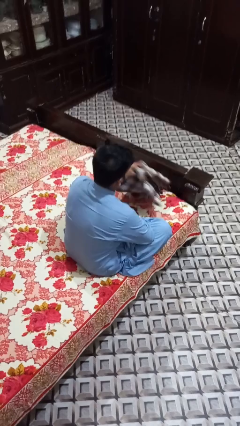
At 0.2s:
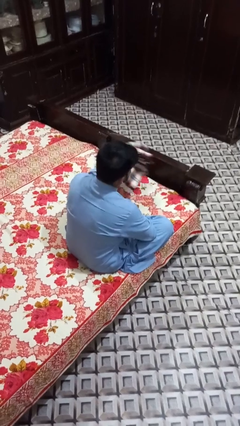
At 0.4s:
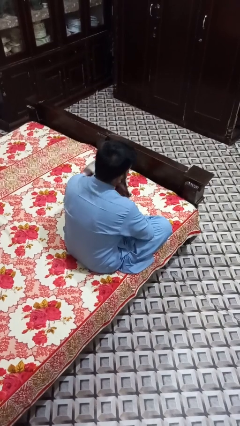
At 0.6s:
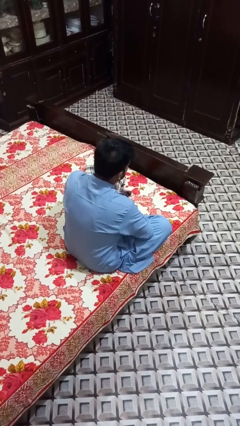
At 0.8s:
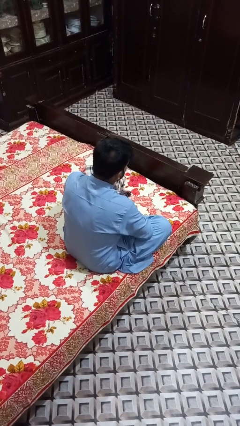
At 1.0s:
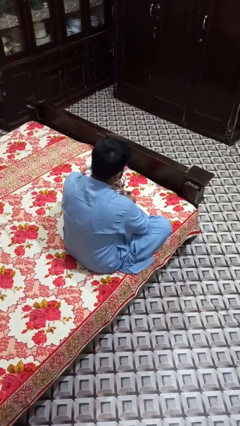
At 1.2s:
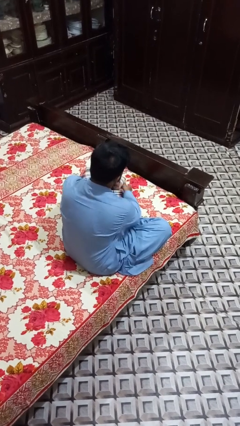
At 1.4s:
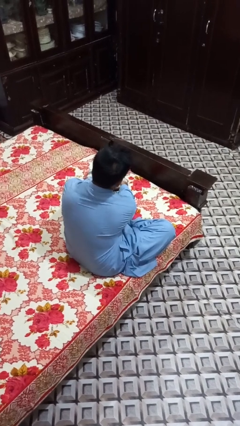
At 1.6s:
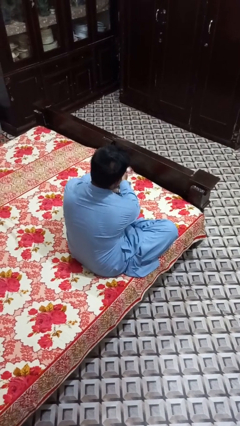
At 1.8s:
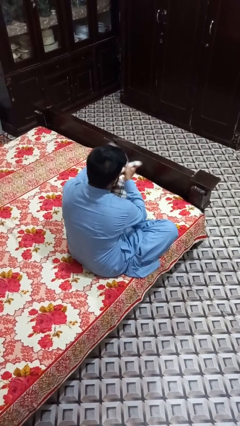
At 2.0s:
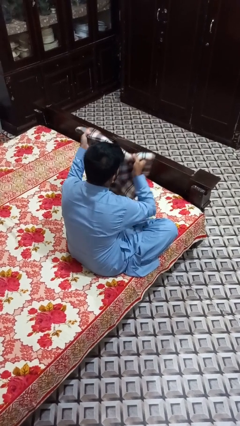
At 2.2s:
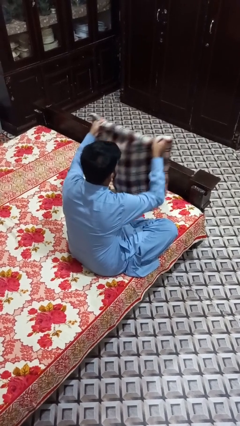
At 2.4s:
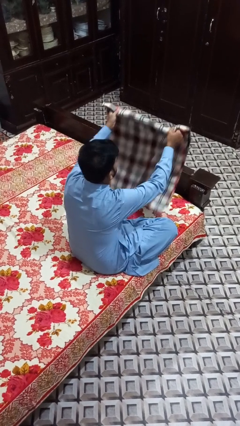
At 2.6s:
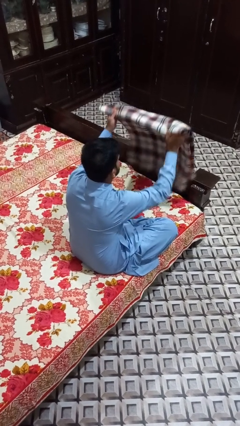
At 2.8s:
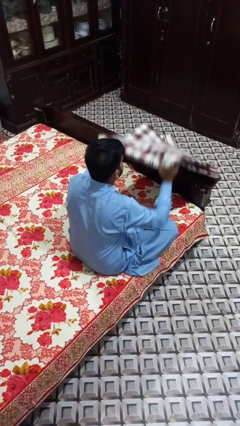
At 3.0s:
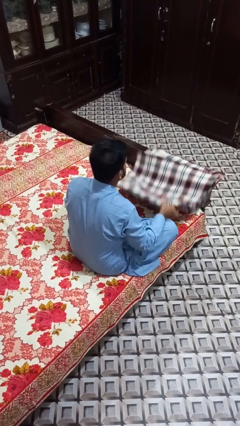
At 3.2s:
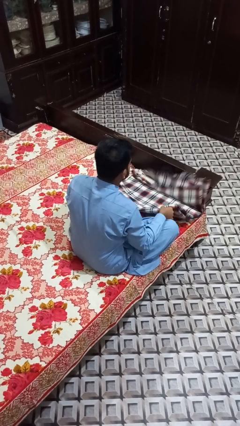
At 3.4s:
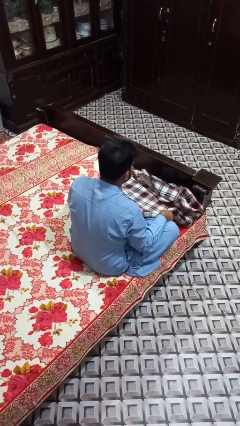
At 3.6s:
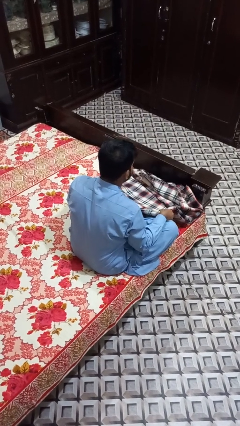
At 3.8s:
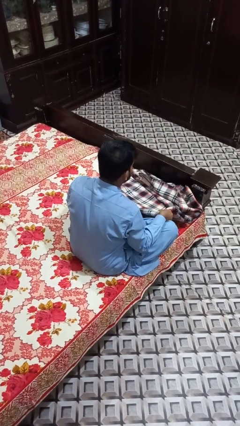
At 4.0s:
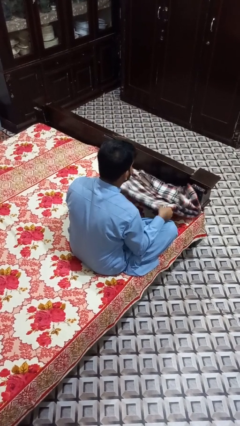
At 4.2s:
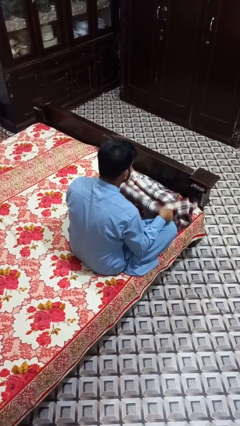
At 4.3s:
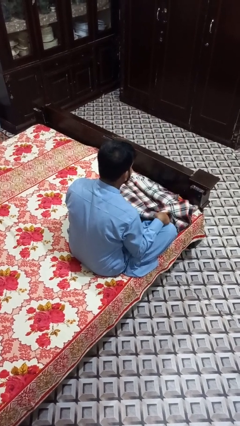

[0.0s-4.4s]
person unfolds blanket

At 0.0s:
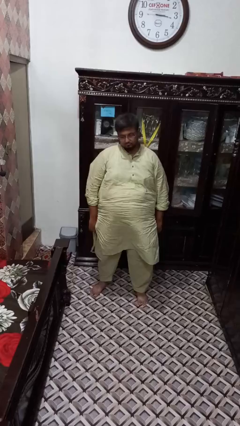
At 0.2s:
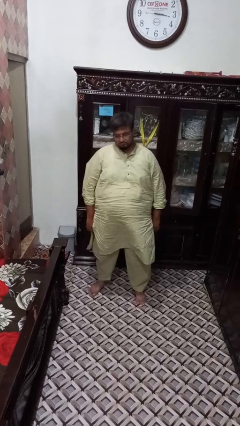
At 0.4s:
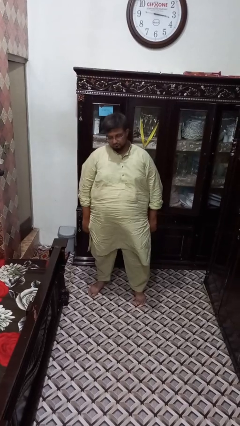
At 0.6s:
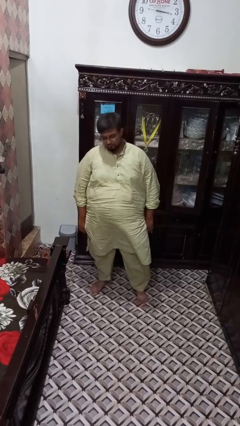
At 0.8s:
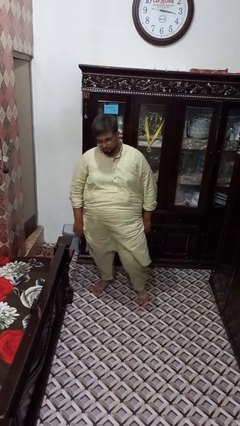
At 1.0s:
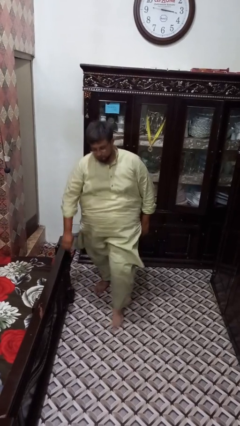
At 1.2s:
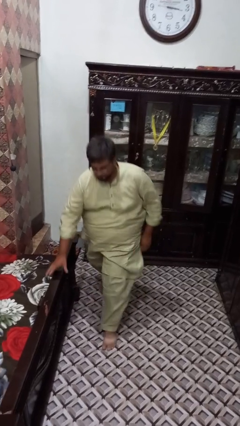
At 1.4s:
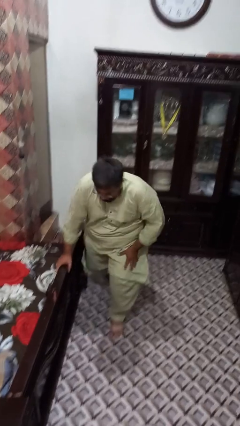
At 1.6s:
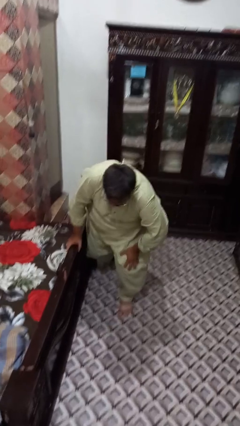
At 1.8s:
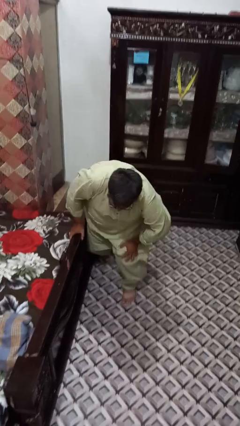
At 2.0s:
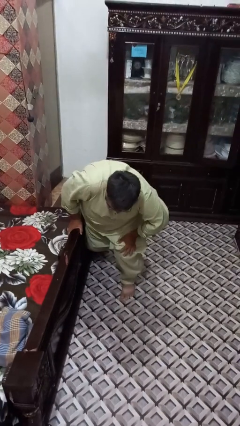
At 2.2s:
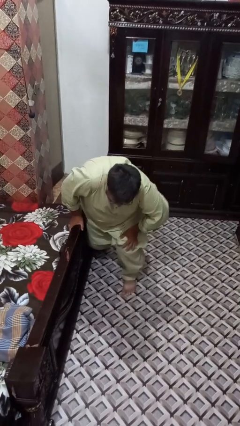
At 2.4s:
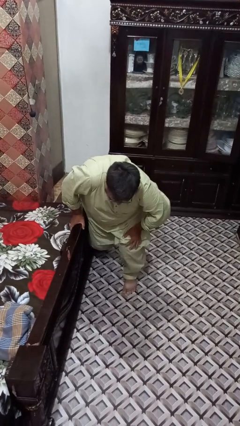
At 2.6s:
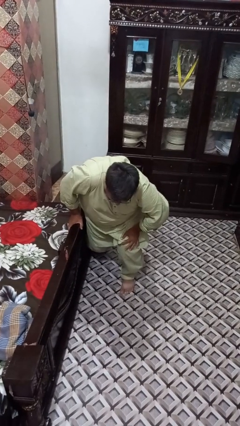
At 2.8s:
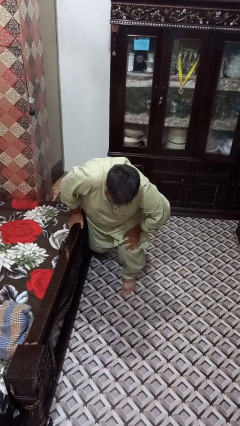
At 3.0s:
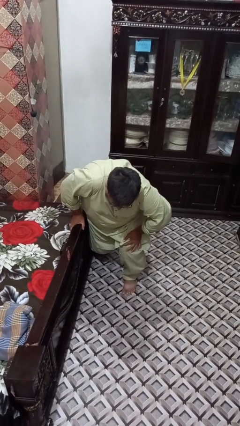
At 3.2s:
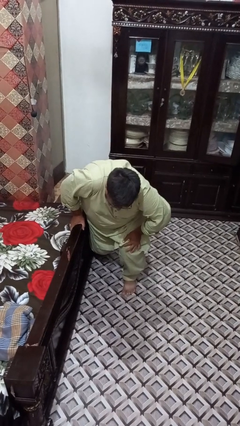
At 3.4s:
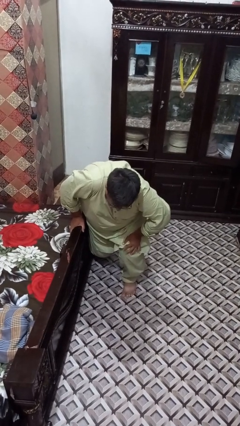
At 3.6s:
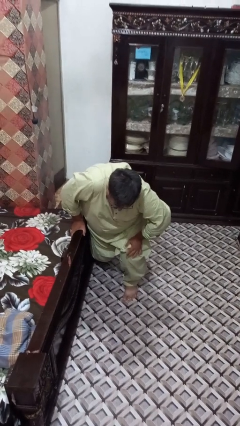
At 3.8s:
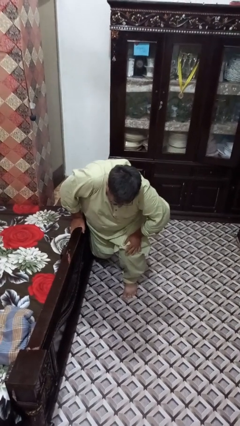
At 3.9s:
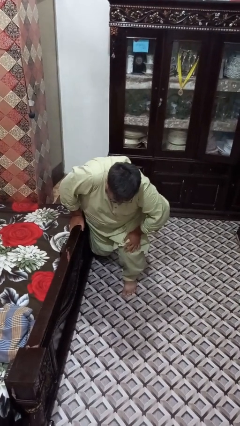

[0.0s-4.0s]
person trips on object on floor

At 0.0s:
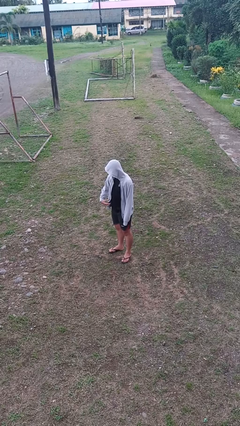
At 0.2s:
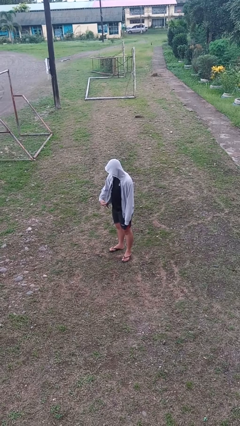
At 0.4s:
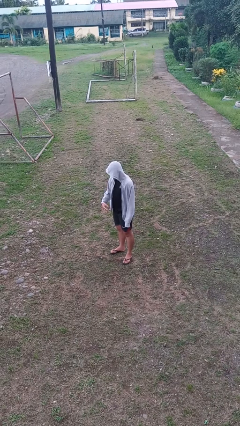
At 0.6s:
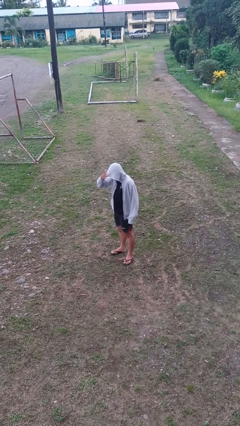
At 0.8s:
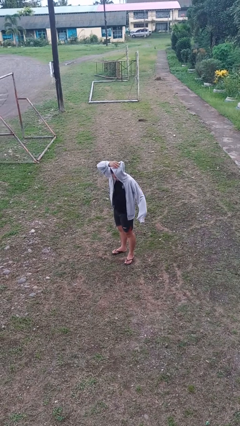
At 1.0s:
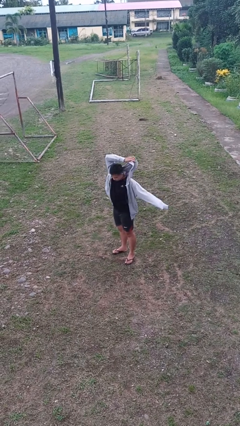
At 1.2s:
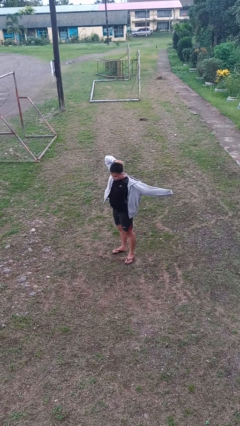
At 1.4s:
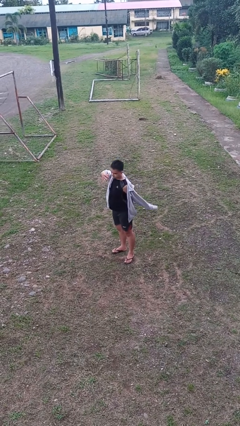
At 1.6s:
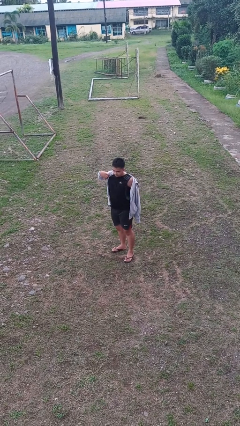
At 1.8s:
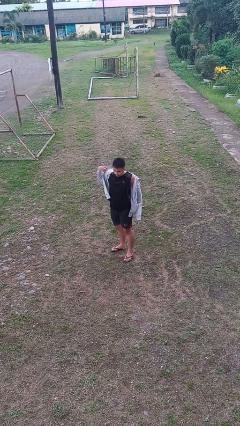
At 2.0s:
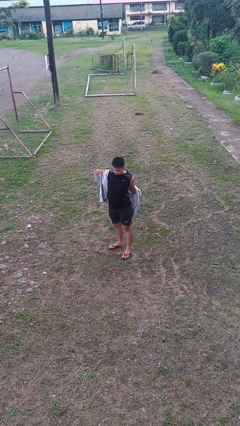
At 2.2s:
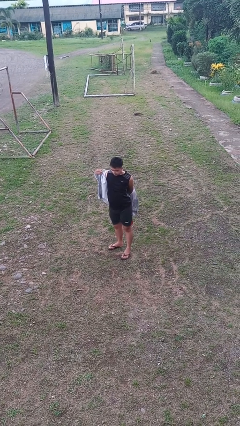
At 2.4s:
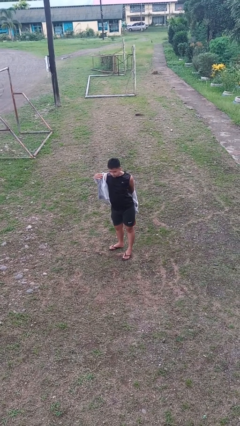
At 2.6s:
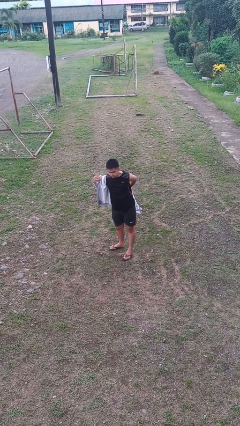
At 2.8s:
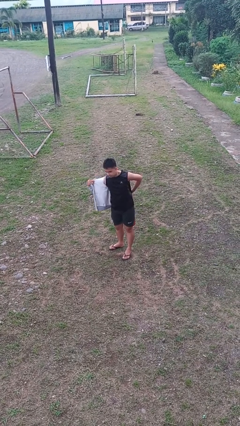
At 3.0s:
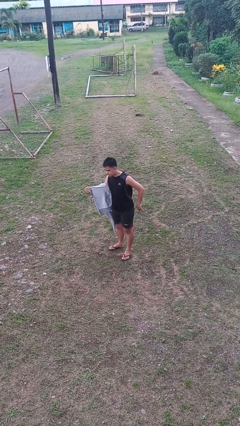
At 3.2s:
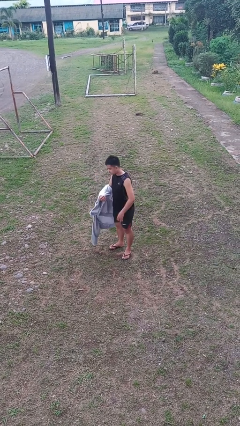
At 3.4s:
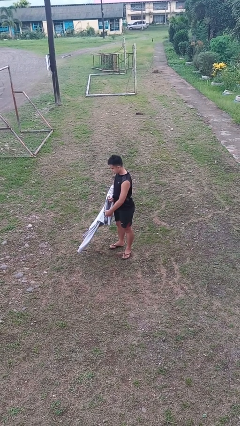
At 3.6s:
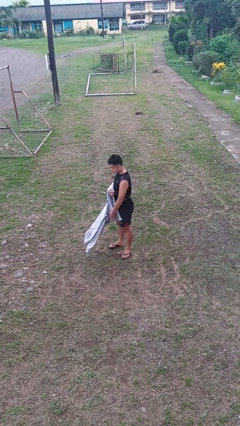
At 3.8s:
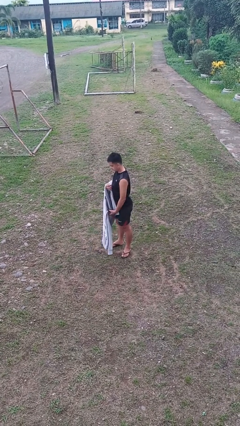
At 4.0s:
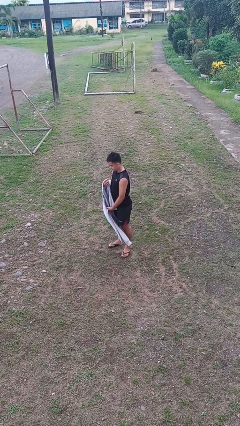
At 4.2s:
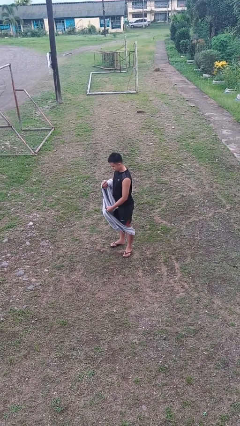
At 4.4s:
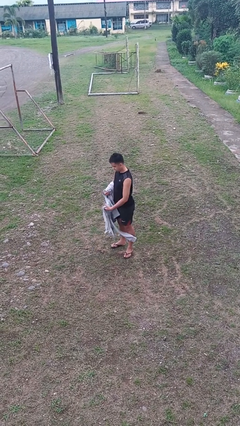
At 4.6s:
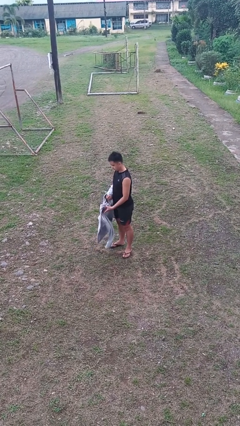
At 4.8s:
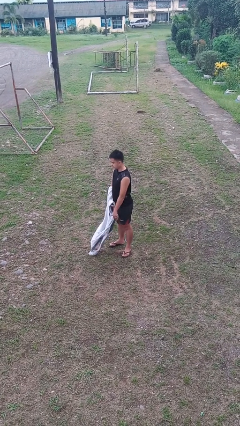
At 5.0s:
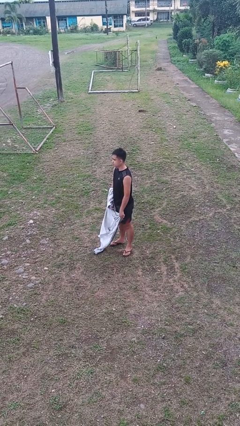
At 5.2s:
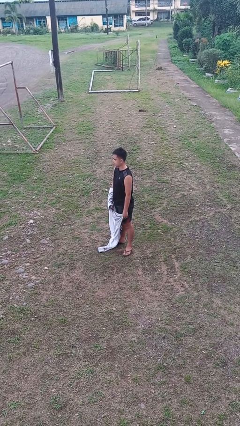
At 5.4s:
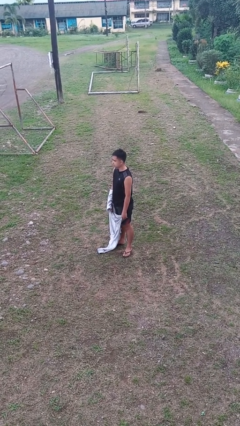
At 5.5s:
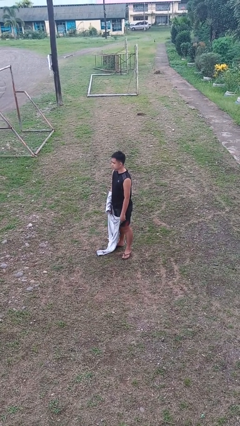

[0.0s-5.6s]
person takes off hoodie

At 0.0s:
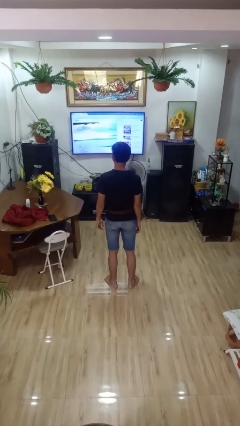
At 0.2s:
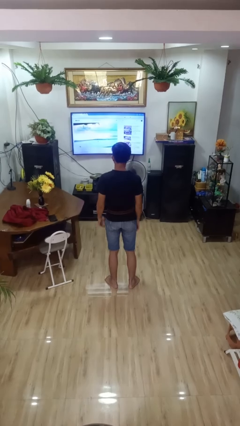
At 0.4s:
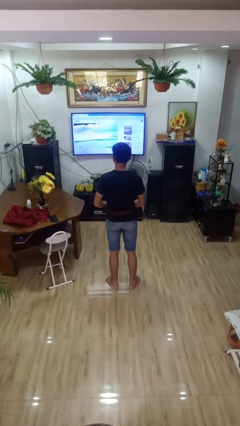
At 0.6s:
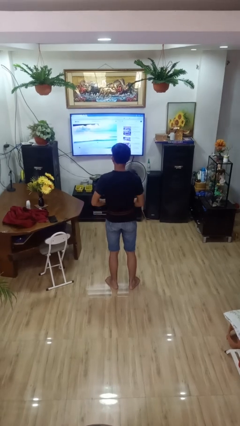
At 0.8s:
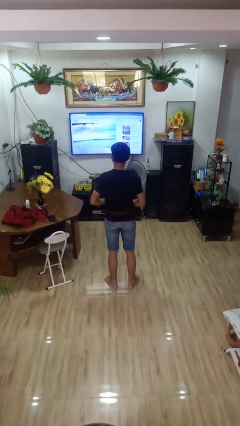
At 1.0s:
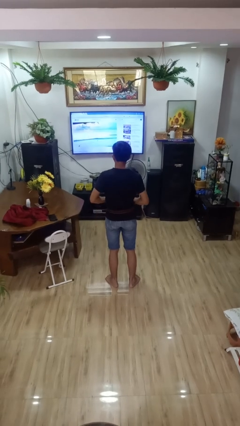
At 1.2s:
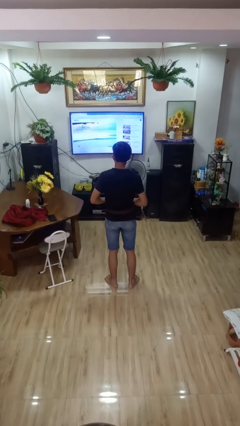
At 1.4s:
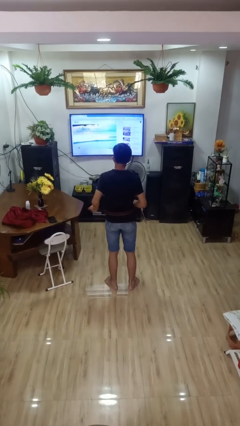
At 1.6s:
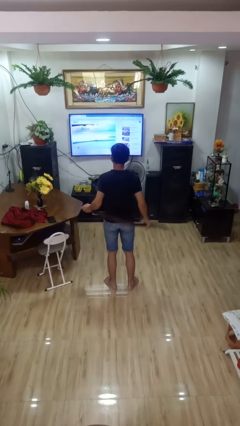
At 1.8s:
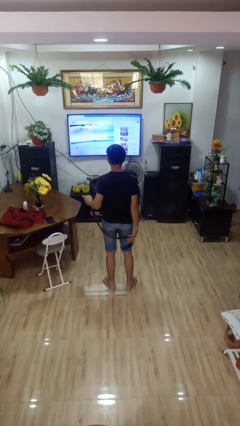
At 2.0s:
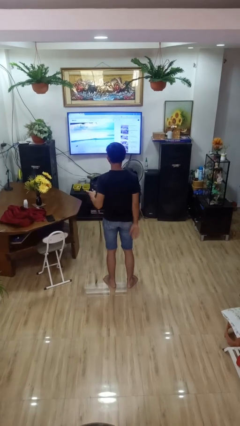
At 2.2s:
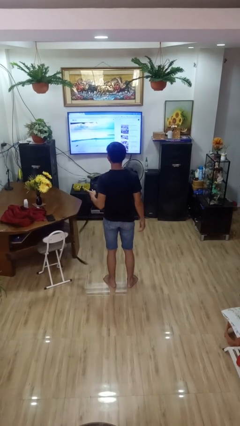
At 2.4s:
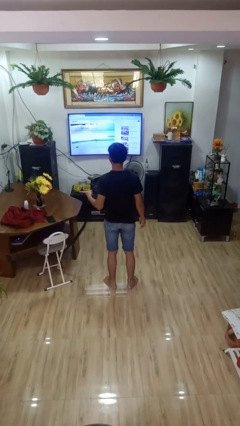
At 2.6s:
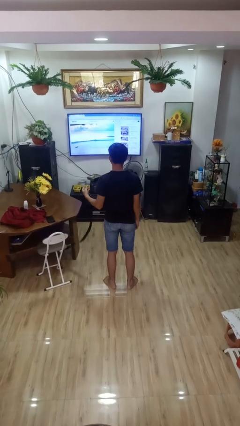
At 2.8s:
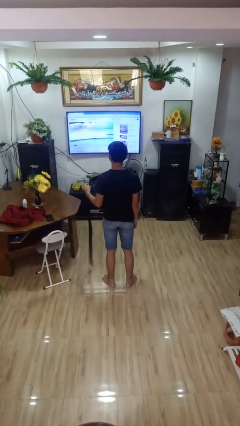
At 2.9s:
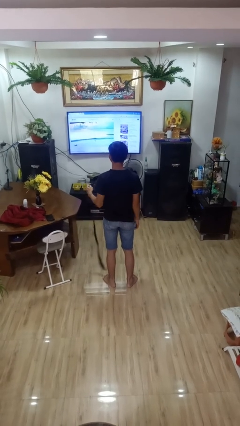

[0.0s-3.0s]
person takes off belt

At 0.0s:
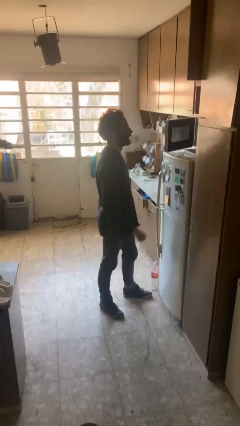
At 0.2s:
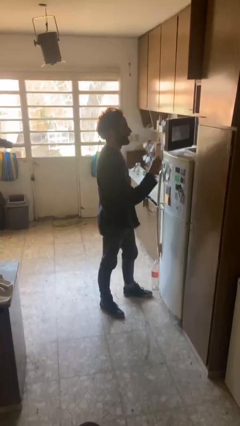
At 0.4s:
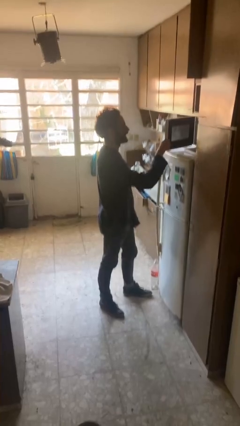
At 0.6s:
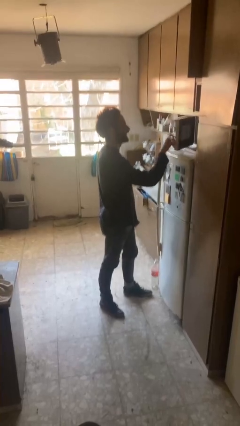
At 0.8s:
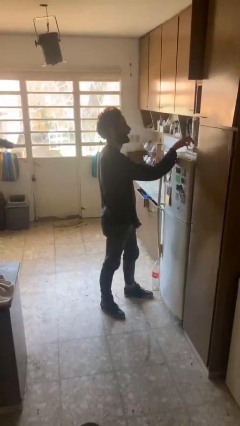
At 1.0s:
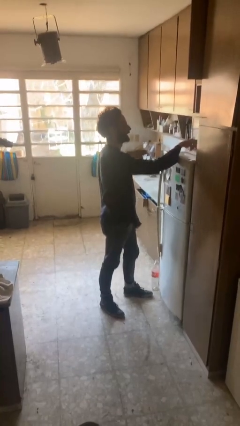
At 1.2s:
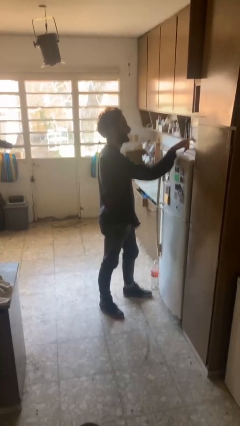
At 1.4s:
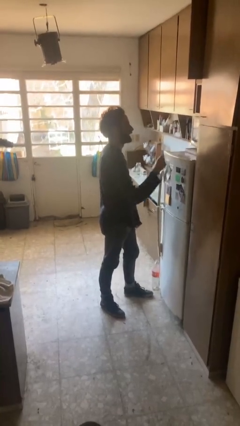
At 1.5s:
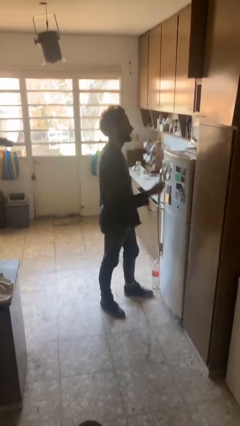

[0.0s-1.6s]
person closes microwave
